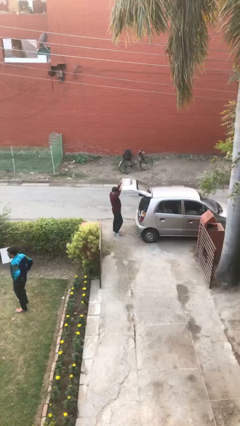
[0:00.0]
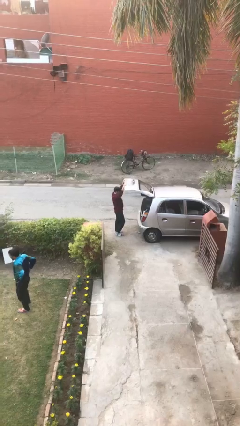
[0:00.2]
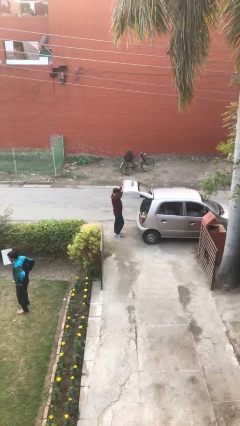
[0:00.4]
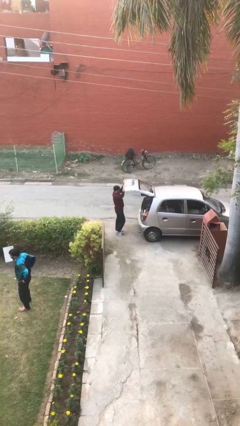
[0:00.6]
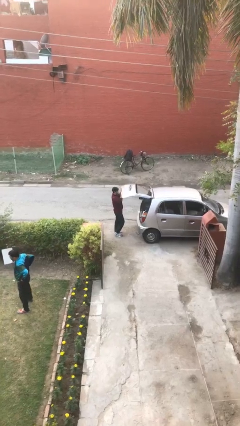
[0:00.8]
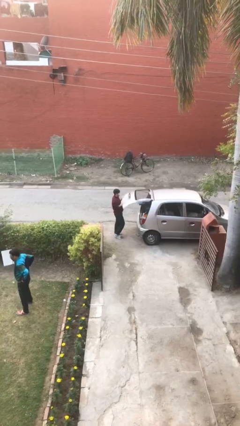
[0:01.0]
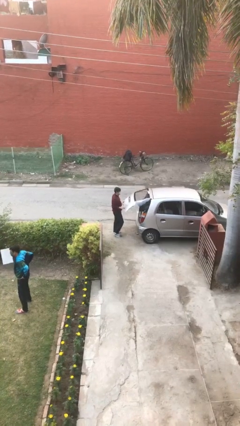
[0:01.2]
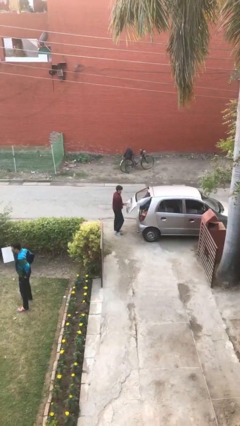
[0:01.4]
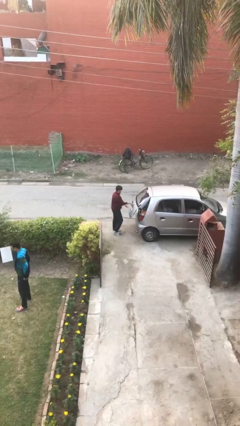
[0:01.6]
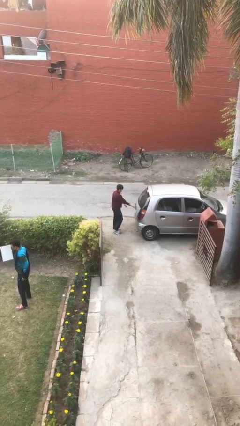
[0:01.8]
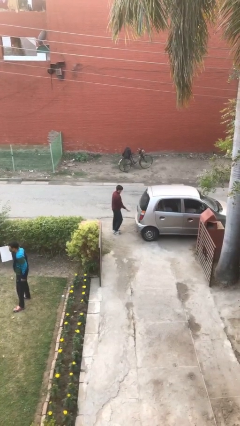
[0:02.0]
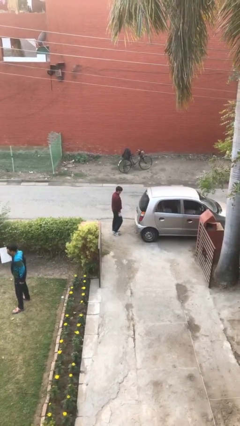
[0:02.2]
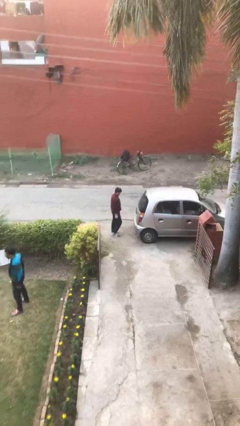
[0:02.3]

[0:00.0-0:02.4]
person closes car trunk

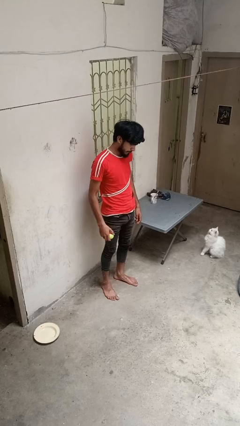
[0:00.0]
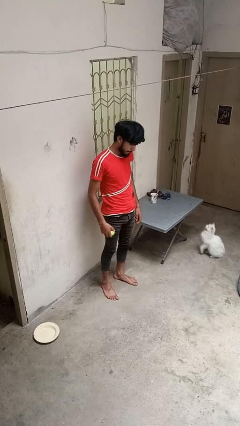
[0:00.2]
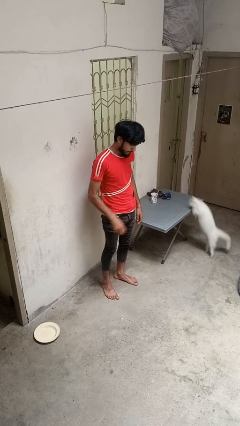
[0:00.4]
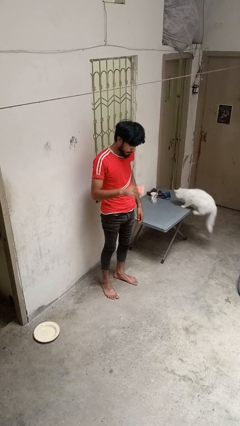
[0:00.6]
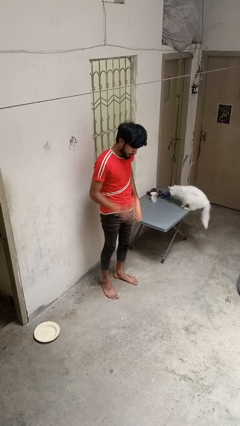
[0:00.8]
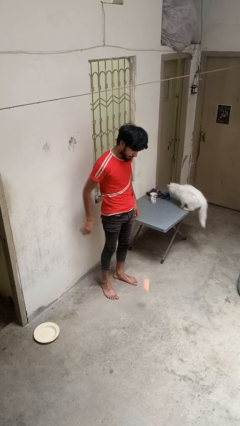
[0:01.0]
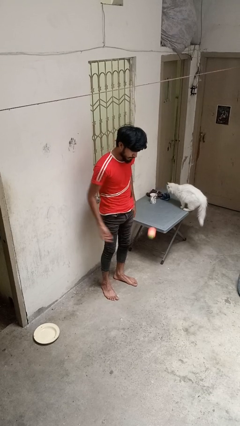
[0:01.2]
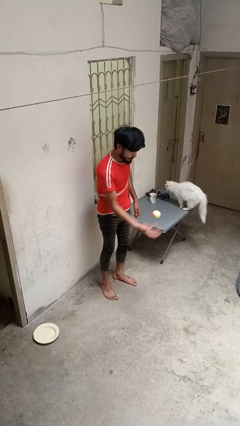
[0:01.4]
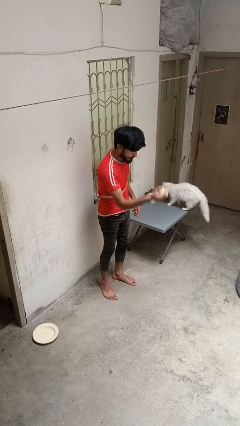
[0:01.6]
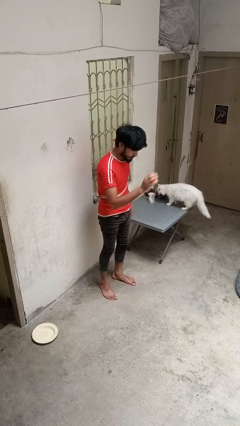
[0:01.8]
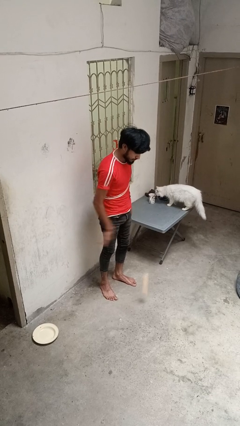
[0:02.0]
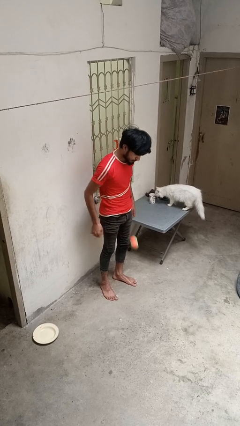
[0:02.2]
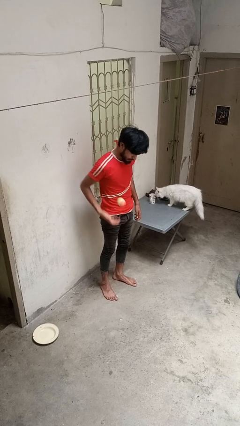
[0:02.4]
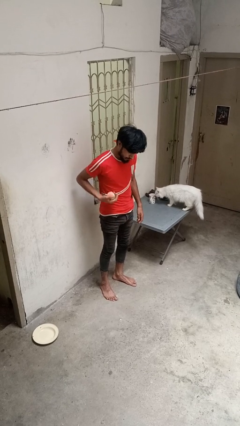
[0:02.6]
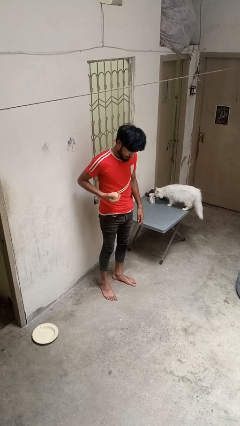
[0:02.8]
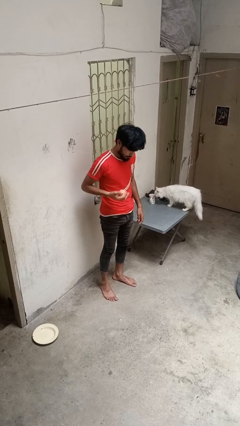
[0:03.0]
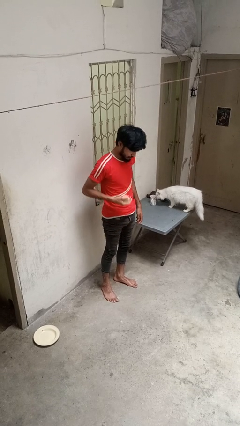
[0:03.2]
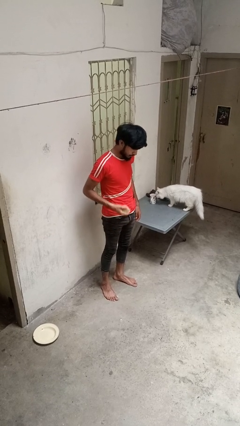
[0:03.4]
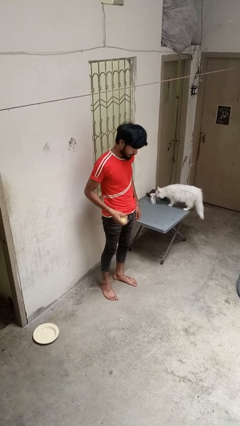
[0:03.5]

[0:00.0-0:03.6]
person bounces ball on floor

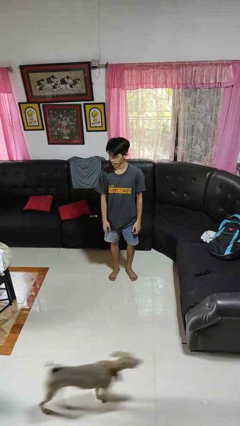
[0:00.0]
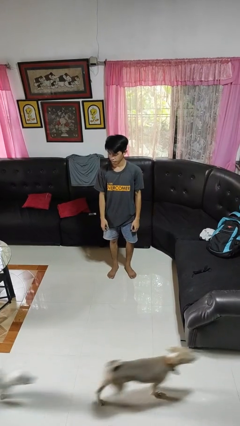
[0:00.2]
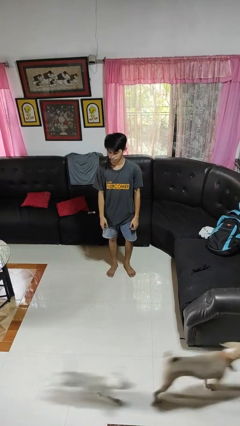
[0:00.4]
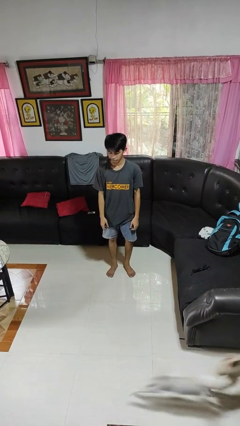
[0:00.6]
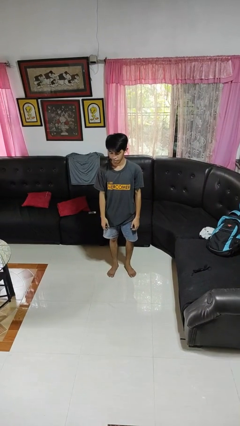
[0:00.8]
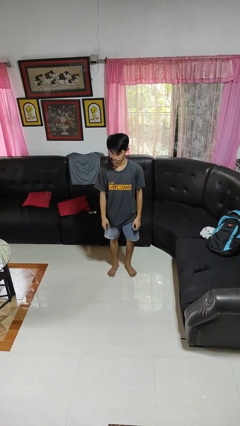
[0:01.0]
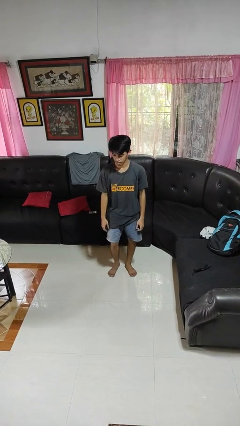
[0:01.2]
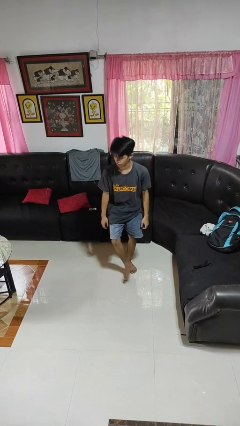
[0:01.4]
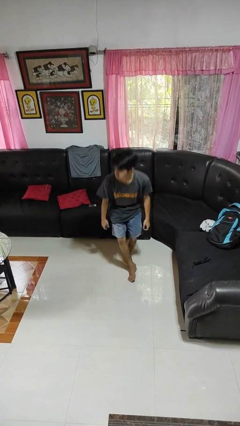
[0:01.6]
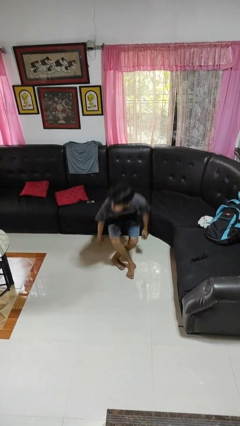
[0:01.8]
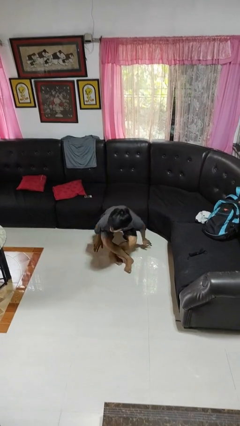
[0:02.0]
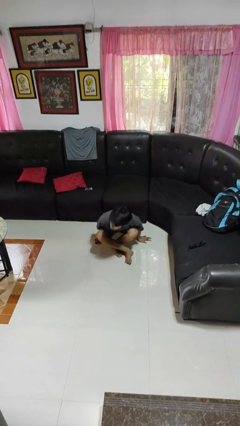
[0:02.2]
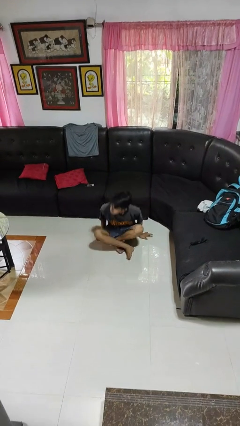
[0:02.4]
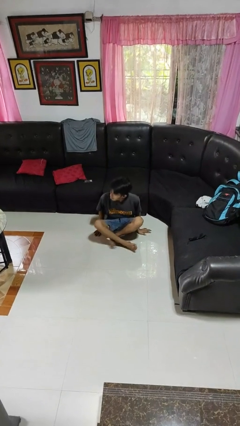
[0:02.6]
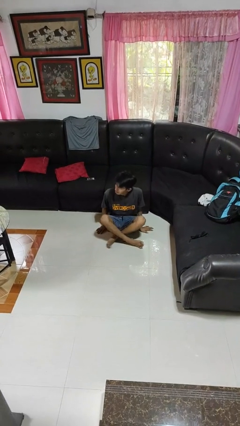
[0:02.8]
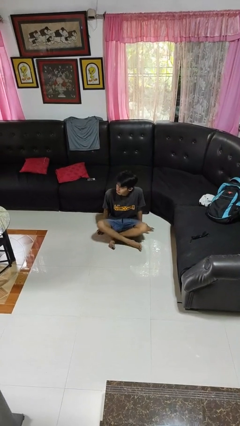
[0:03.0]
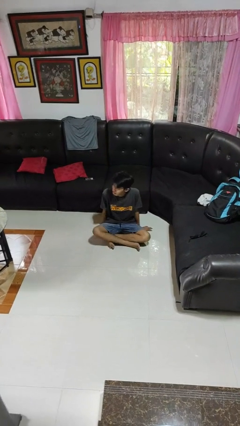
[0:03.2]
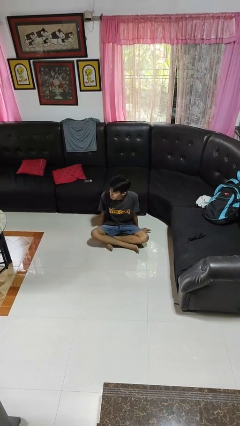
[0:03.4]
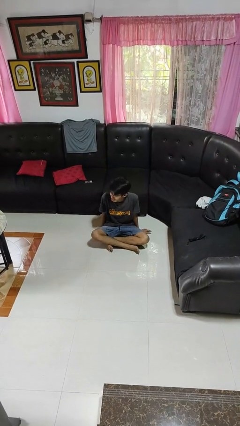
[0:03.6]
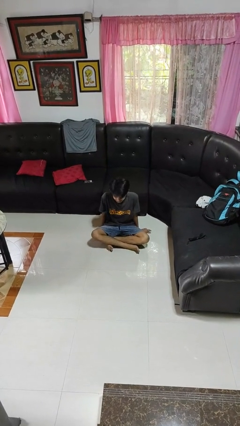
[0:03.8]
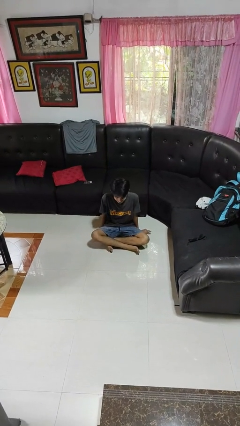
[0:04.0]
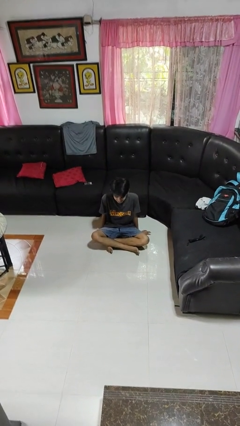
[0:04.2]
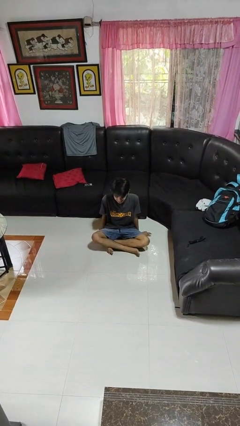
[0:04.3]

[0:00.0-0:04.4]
person sits crisscross

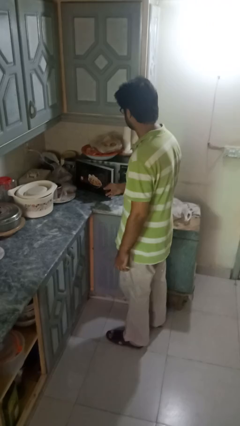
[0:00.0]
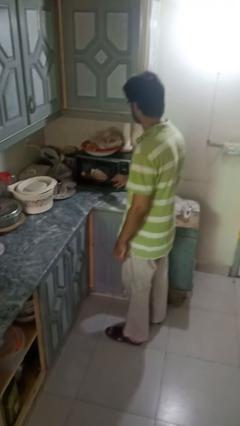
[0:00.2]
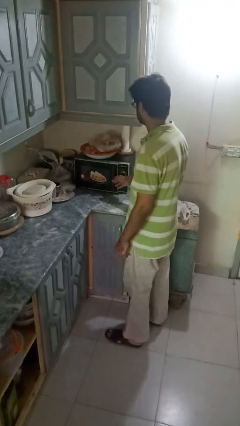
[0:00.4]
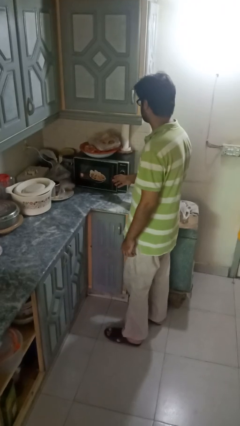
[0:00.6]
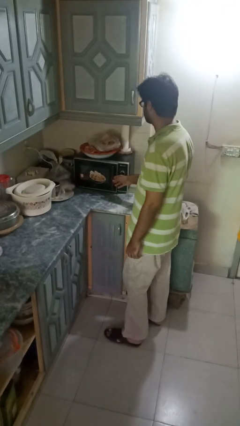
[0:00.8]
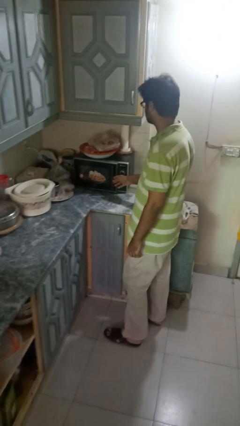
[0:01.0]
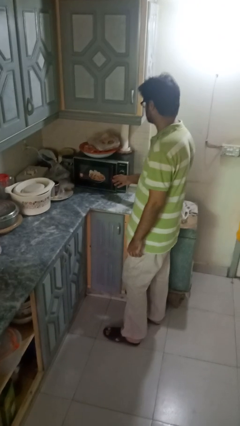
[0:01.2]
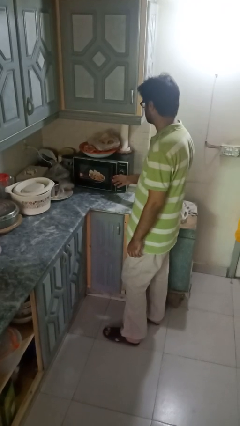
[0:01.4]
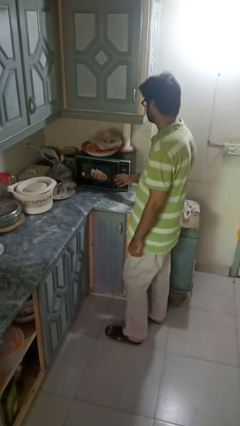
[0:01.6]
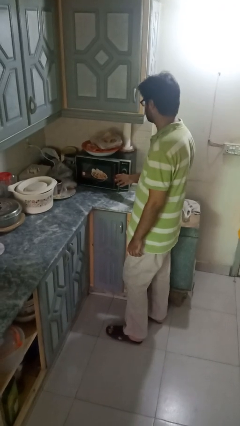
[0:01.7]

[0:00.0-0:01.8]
person closes microwave

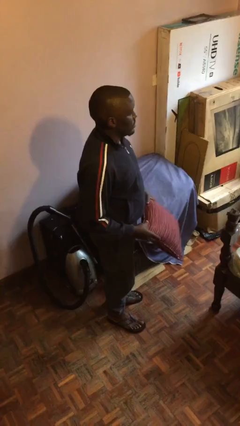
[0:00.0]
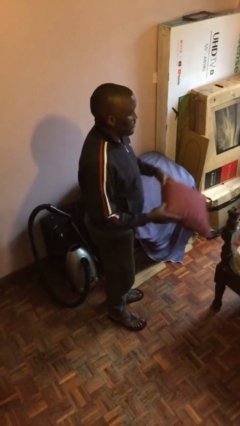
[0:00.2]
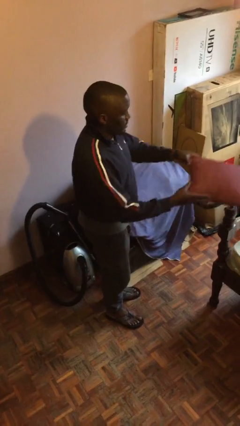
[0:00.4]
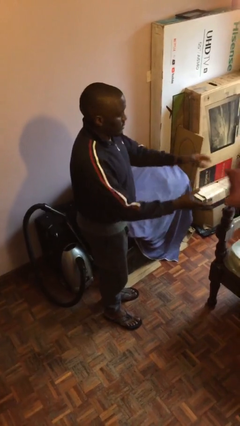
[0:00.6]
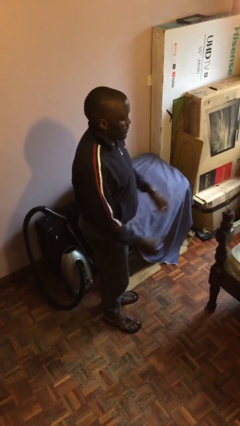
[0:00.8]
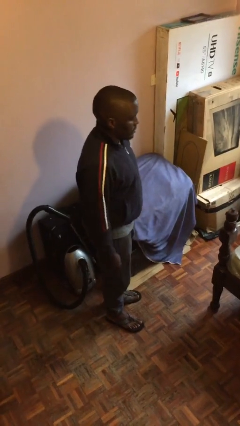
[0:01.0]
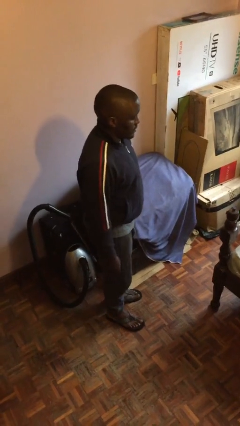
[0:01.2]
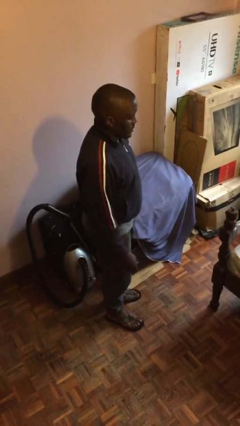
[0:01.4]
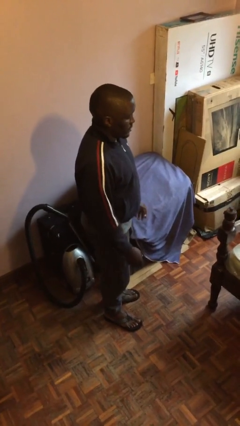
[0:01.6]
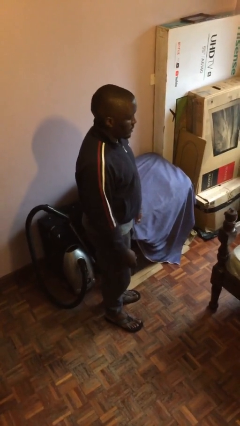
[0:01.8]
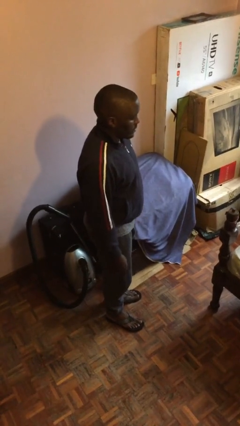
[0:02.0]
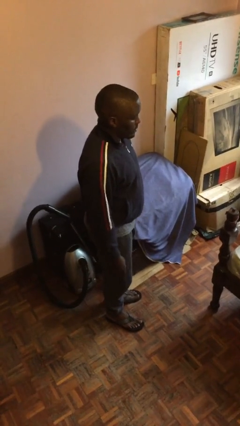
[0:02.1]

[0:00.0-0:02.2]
person throws object on bed

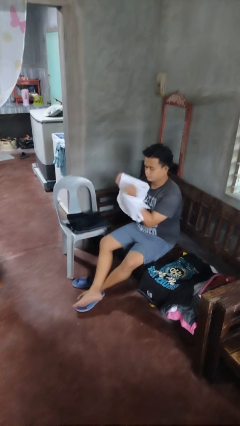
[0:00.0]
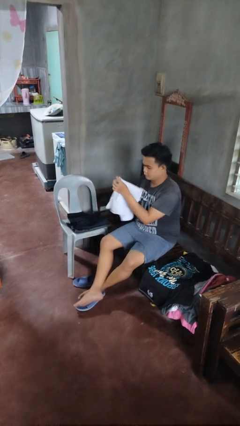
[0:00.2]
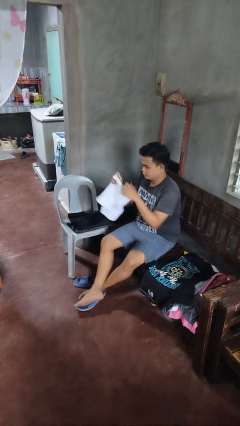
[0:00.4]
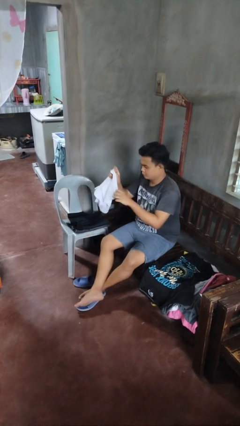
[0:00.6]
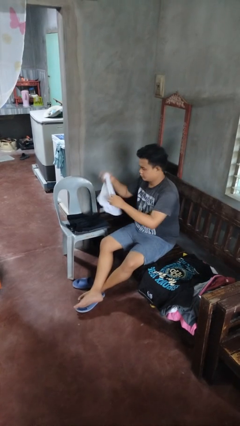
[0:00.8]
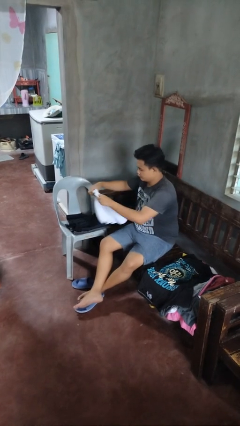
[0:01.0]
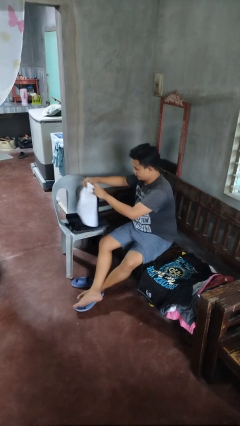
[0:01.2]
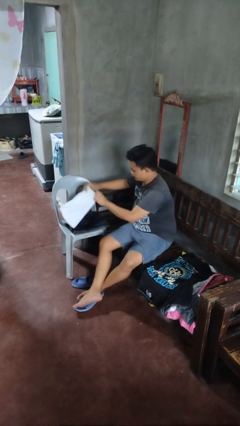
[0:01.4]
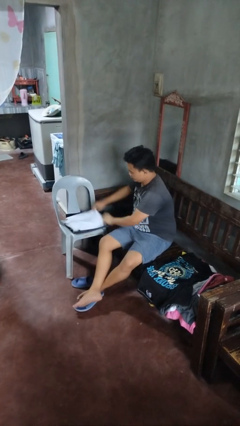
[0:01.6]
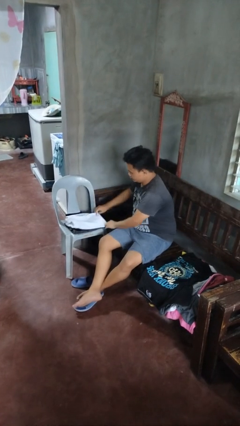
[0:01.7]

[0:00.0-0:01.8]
person folds shirt

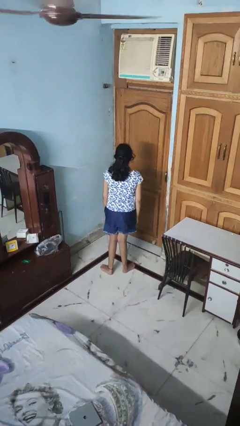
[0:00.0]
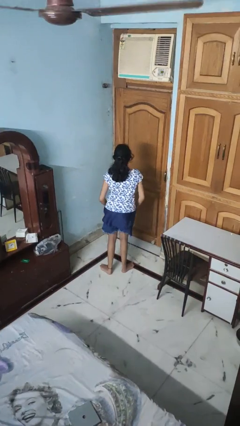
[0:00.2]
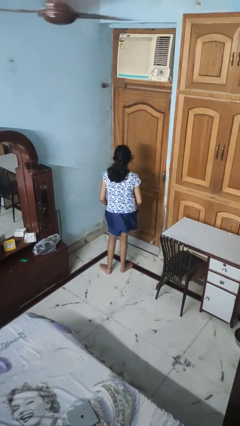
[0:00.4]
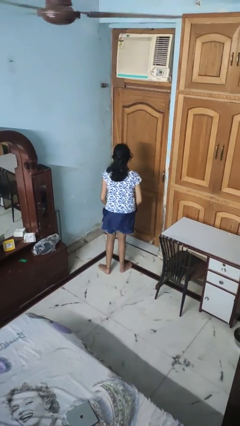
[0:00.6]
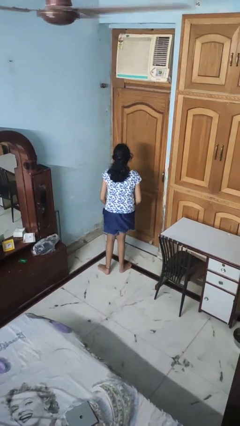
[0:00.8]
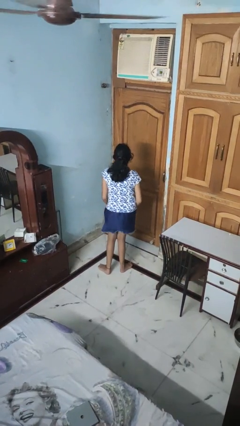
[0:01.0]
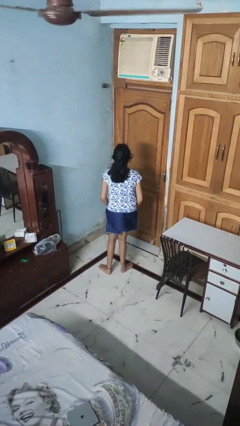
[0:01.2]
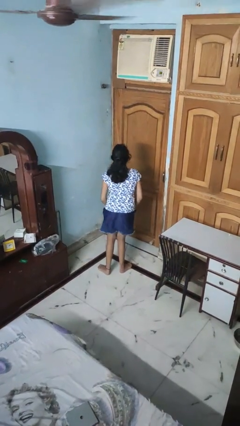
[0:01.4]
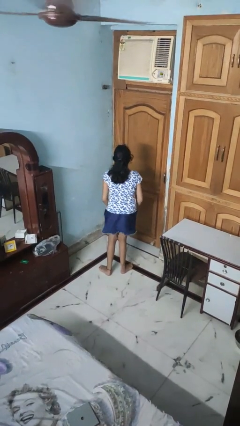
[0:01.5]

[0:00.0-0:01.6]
person wiggles hips
